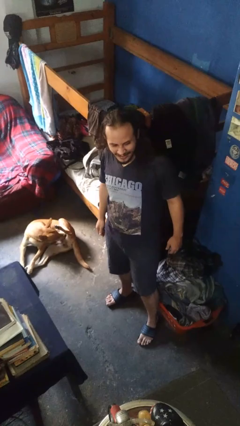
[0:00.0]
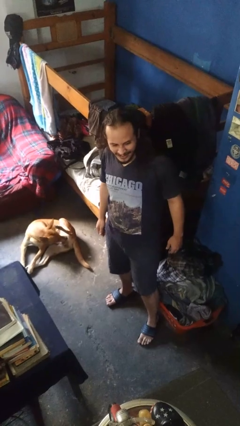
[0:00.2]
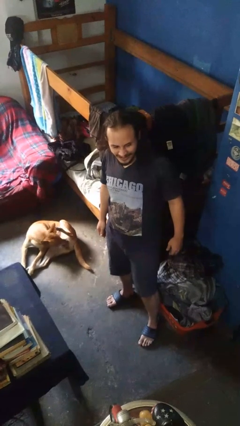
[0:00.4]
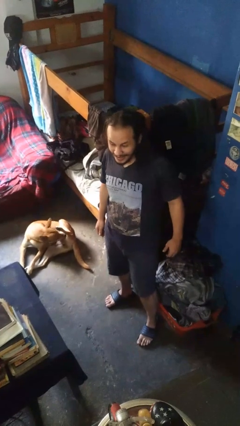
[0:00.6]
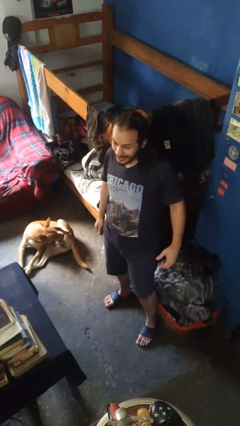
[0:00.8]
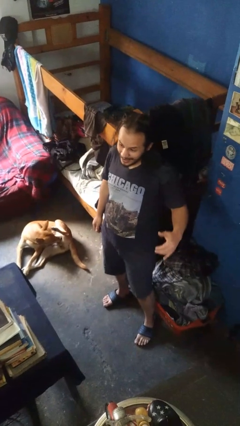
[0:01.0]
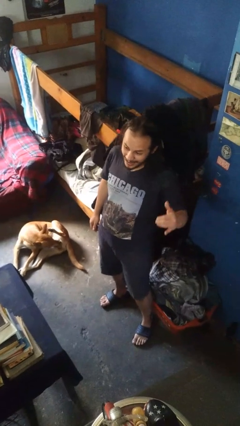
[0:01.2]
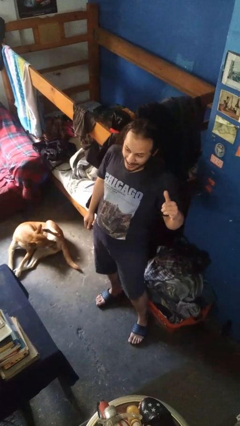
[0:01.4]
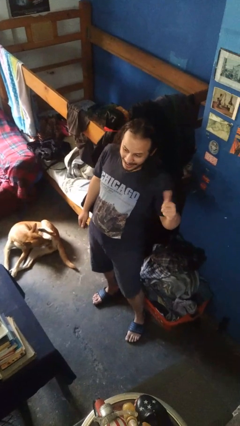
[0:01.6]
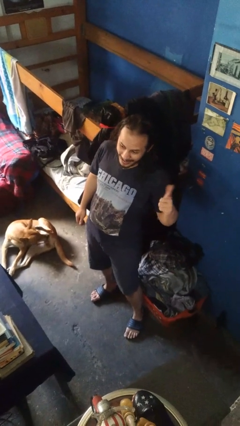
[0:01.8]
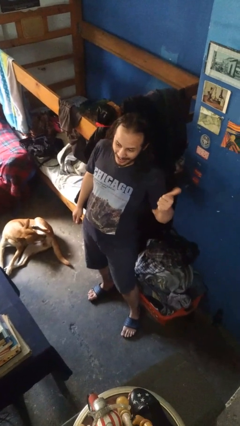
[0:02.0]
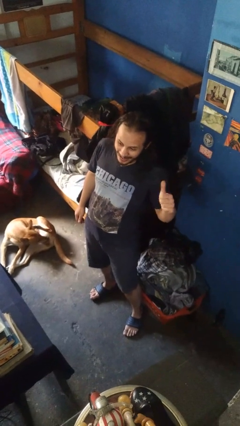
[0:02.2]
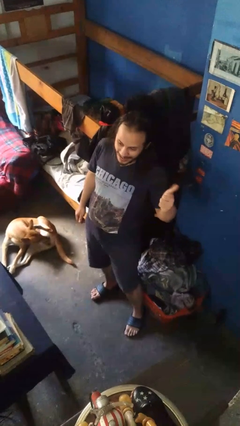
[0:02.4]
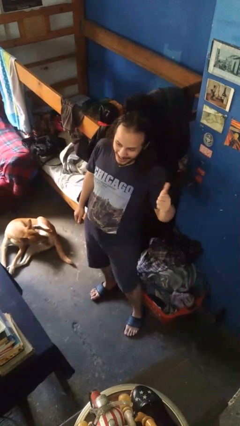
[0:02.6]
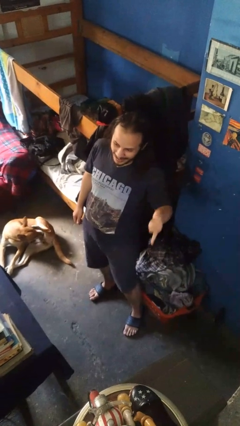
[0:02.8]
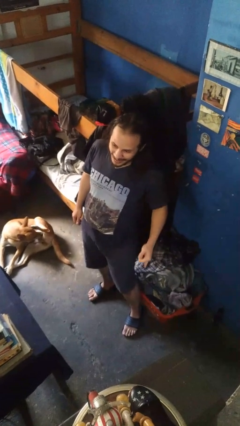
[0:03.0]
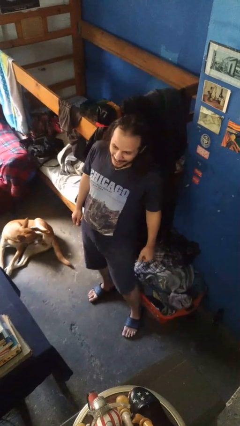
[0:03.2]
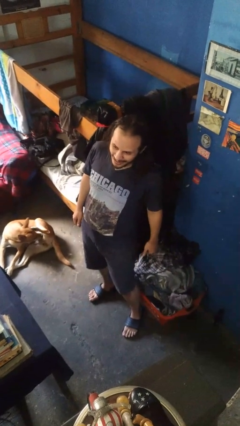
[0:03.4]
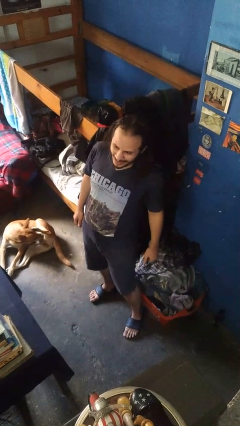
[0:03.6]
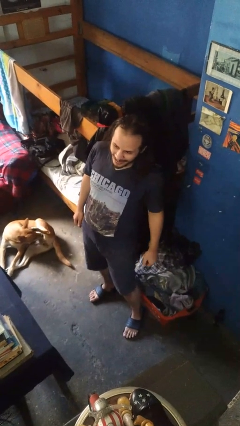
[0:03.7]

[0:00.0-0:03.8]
person gestures hang loose

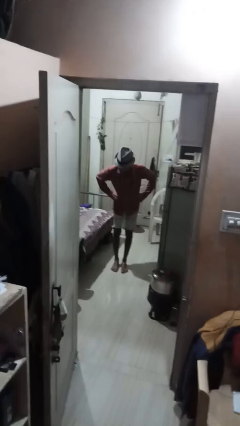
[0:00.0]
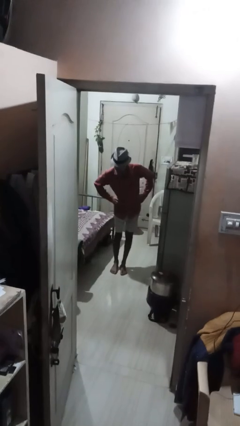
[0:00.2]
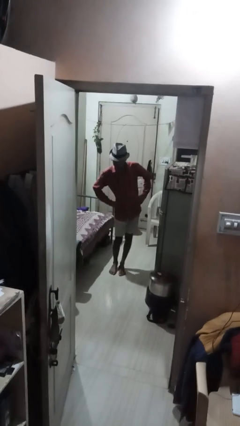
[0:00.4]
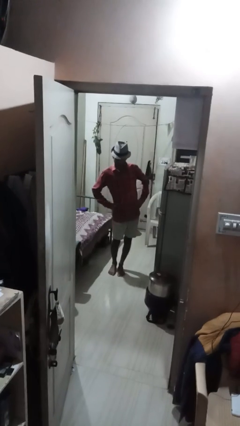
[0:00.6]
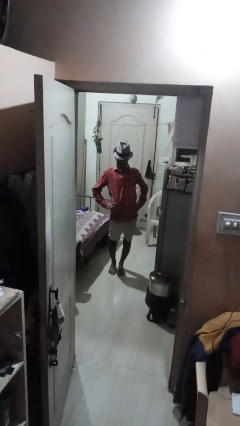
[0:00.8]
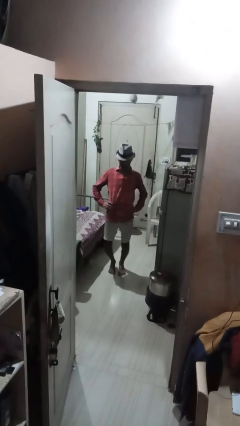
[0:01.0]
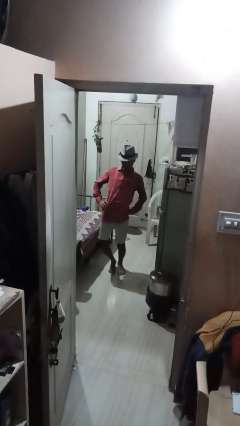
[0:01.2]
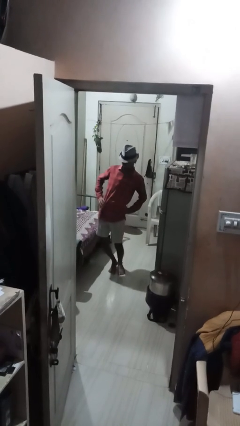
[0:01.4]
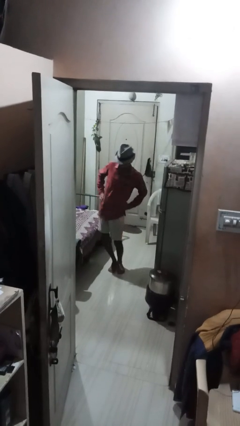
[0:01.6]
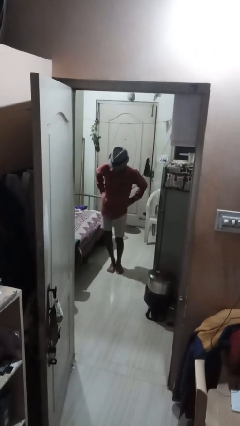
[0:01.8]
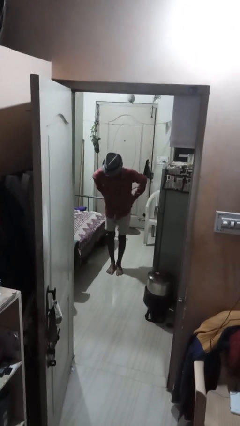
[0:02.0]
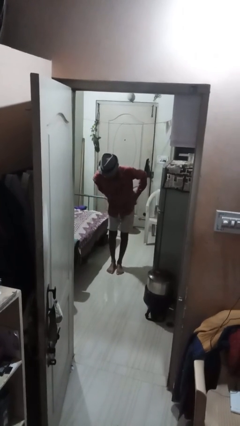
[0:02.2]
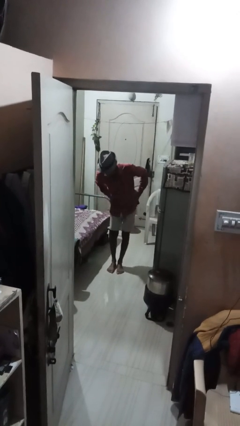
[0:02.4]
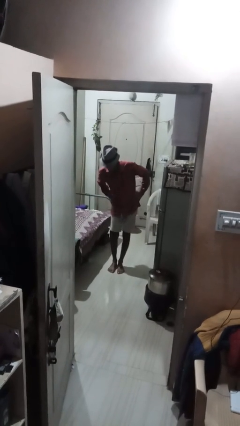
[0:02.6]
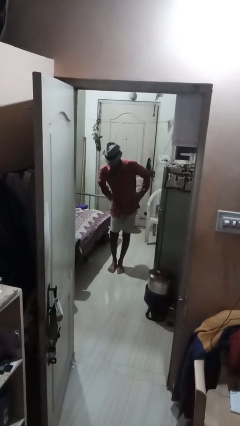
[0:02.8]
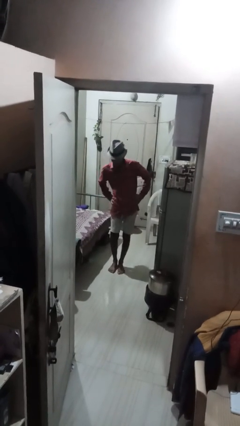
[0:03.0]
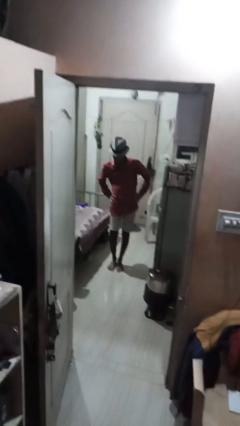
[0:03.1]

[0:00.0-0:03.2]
person wiggles hips

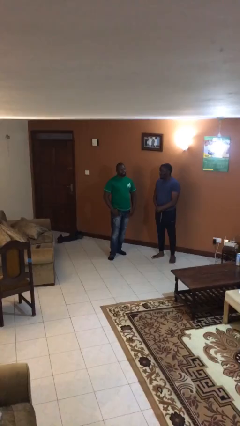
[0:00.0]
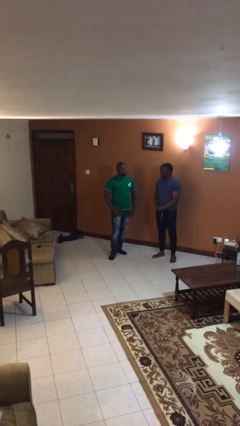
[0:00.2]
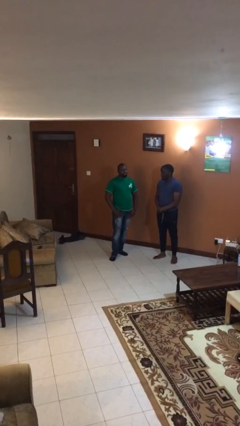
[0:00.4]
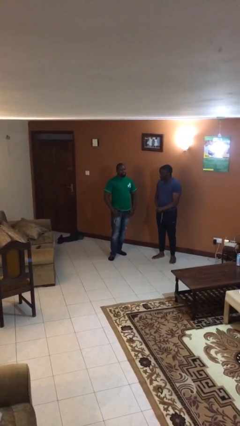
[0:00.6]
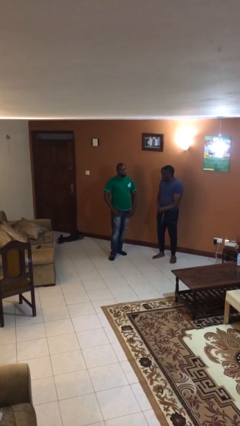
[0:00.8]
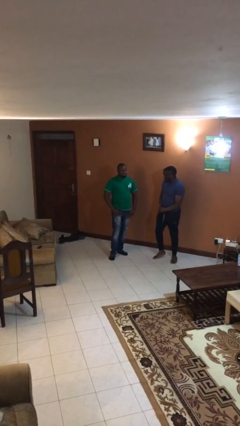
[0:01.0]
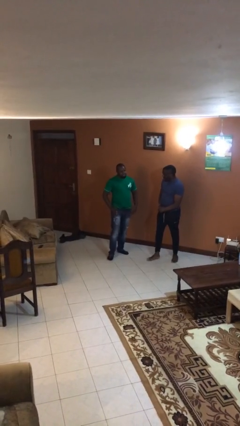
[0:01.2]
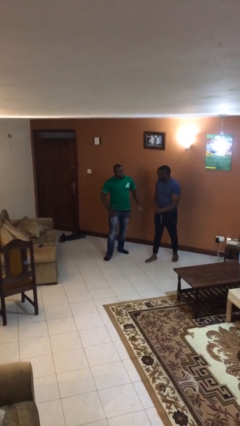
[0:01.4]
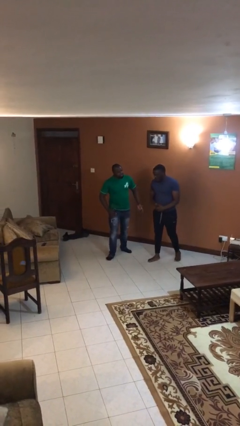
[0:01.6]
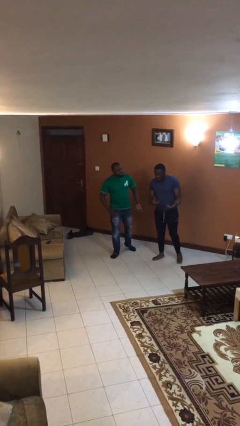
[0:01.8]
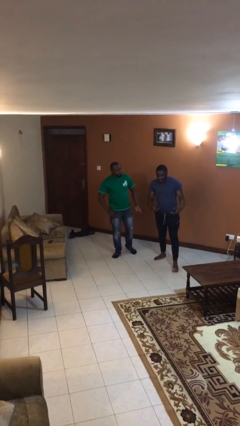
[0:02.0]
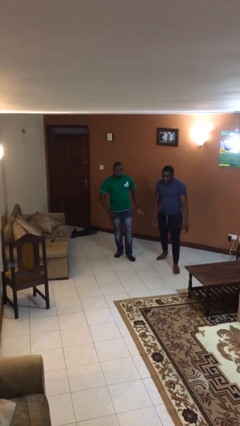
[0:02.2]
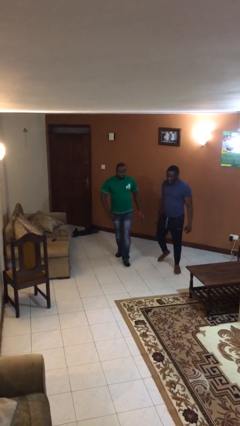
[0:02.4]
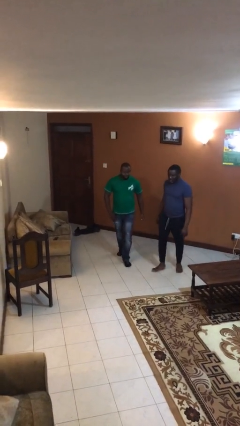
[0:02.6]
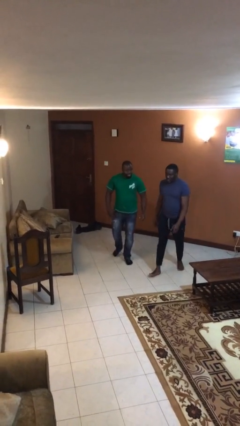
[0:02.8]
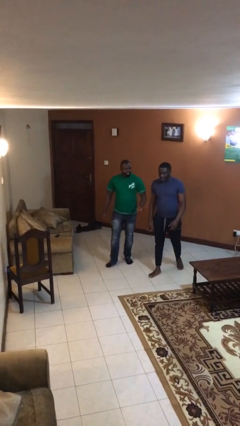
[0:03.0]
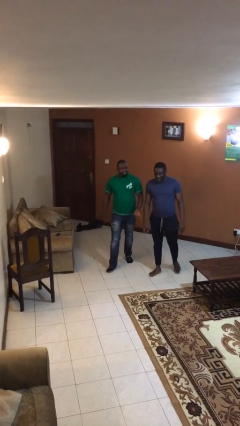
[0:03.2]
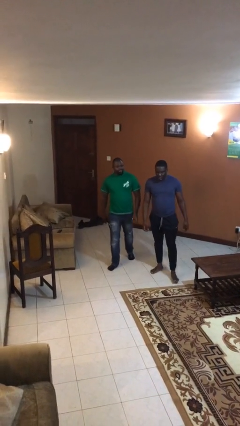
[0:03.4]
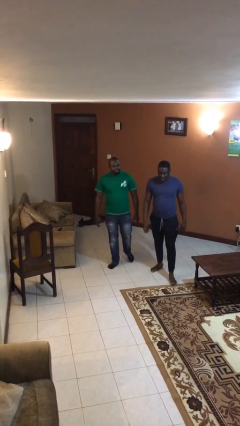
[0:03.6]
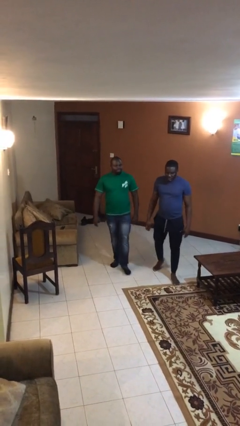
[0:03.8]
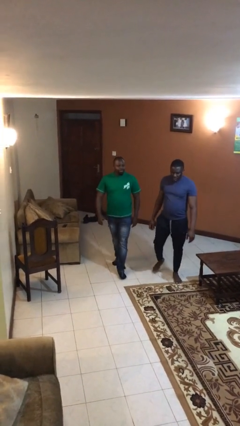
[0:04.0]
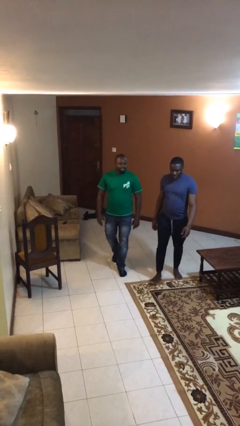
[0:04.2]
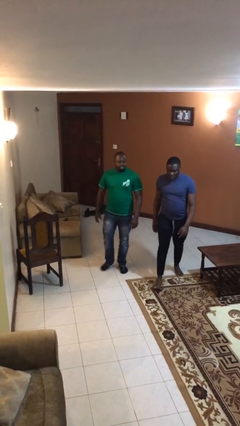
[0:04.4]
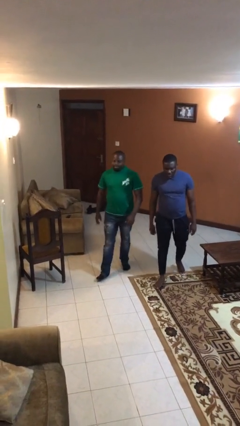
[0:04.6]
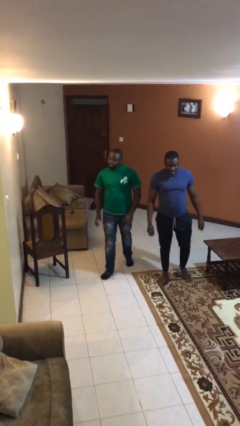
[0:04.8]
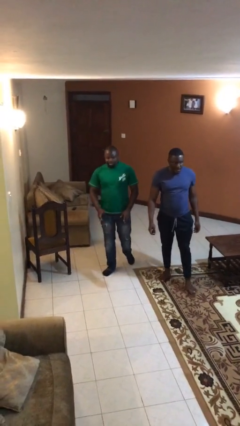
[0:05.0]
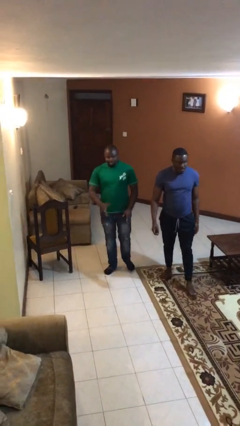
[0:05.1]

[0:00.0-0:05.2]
person talks to person

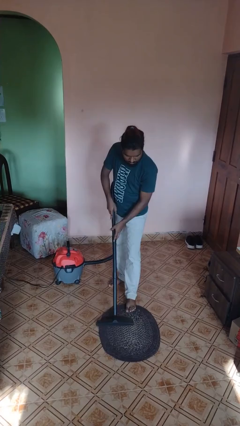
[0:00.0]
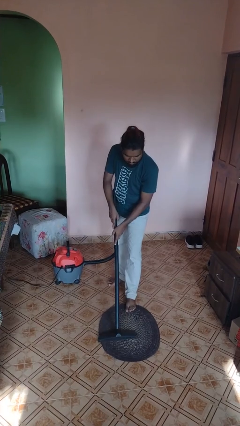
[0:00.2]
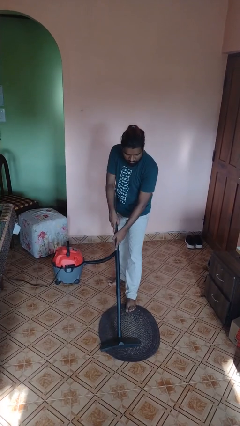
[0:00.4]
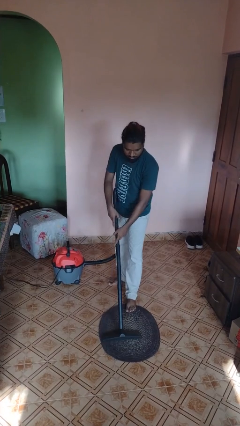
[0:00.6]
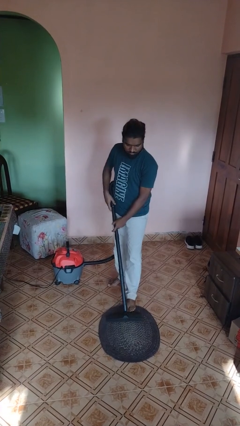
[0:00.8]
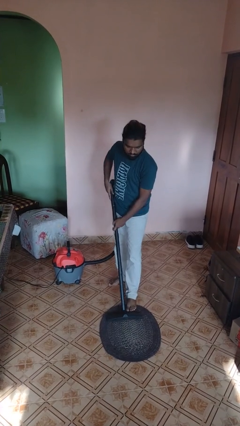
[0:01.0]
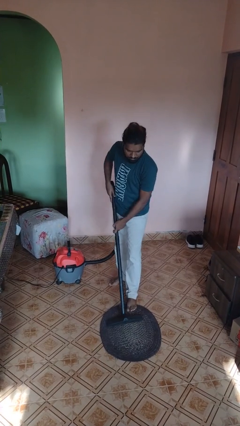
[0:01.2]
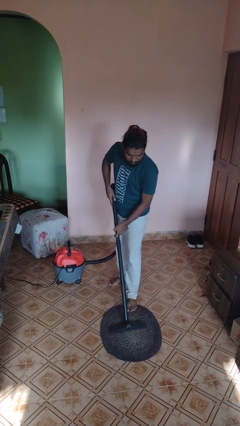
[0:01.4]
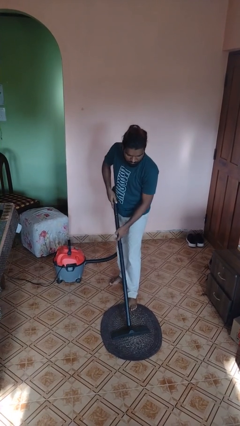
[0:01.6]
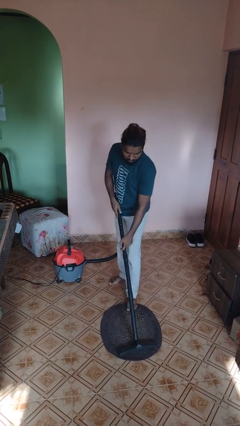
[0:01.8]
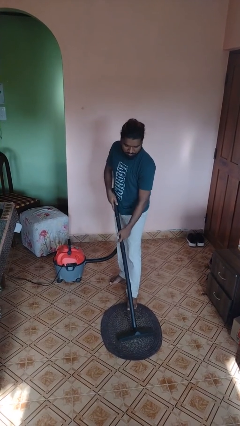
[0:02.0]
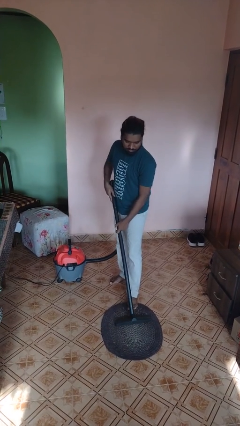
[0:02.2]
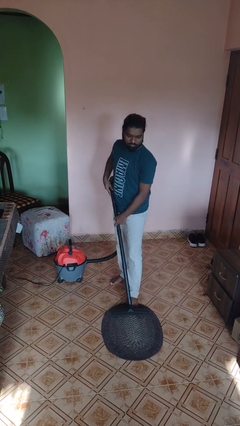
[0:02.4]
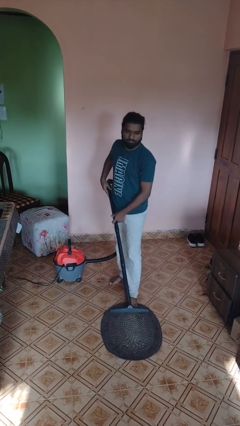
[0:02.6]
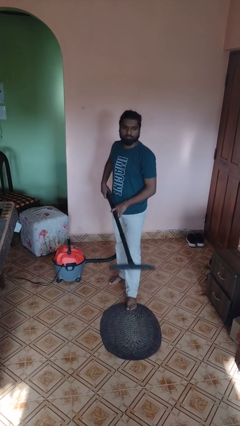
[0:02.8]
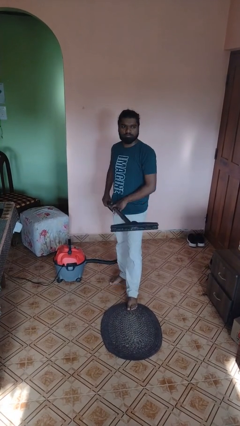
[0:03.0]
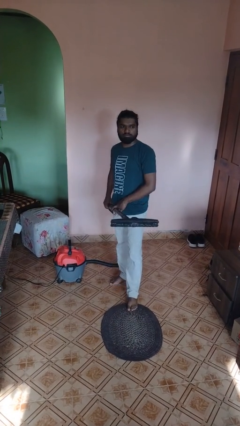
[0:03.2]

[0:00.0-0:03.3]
person vacuums carpet

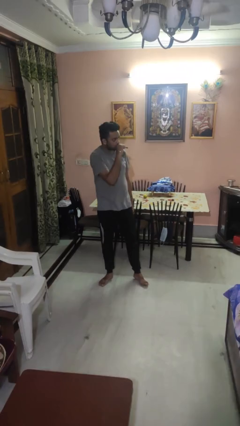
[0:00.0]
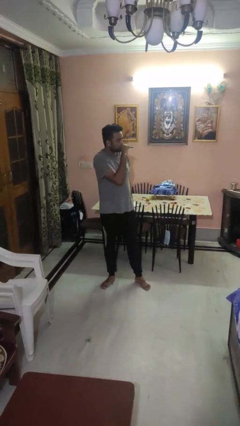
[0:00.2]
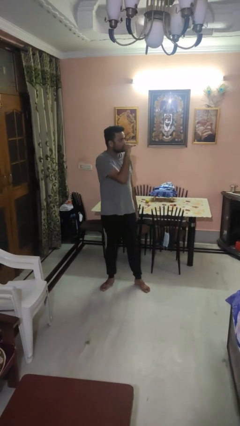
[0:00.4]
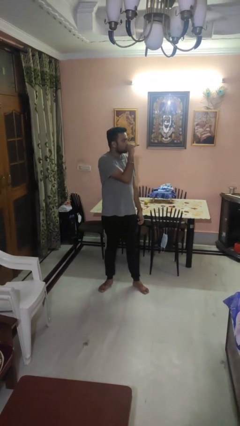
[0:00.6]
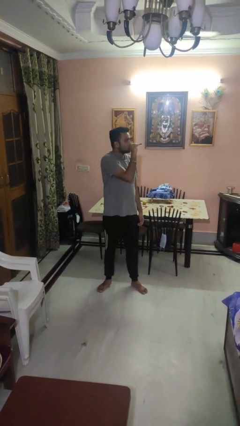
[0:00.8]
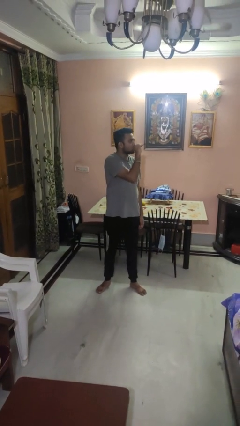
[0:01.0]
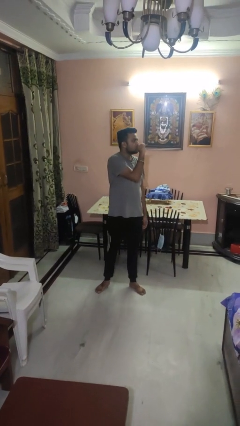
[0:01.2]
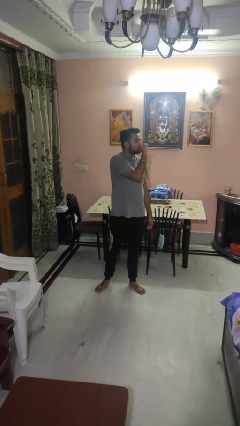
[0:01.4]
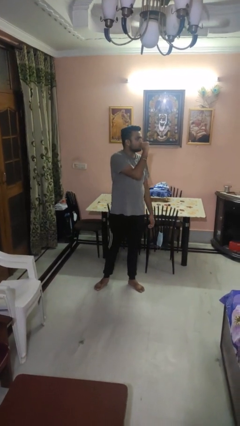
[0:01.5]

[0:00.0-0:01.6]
person vapes

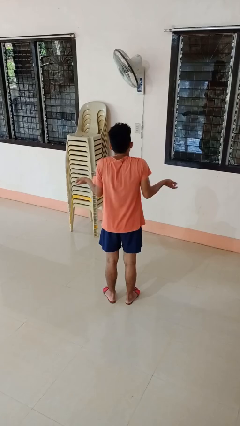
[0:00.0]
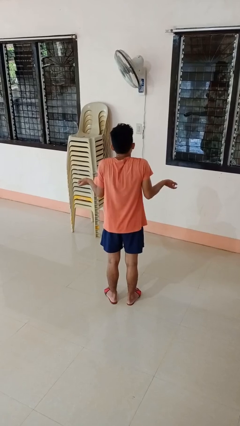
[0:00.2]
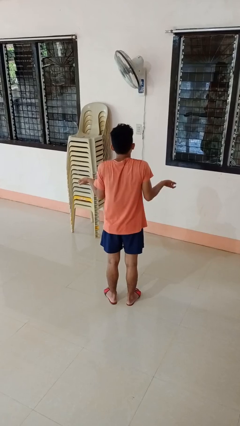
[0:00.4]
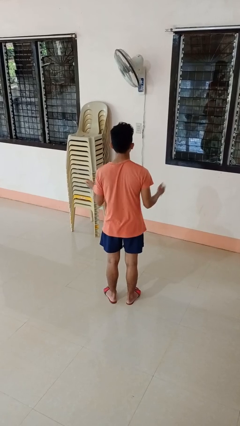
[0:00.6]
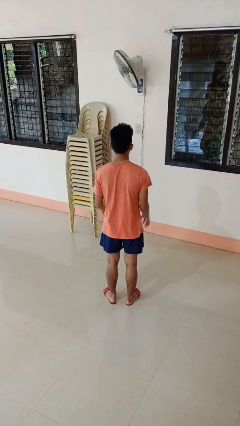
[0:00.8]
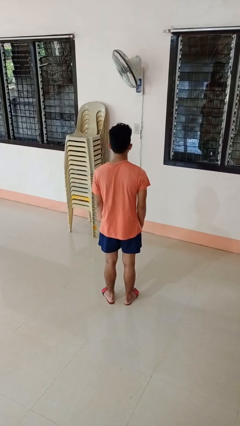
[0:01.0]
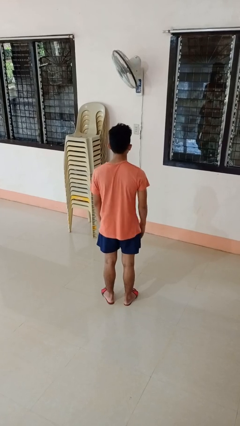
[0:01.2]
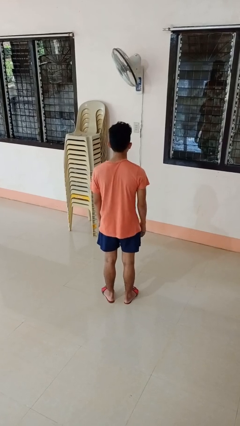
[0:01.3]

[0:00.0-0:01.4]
person shrugs
